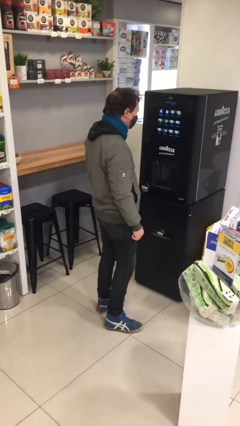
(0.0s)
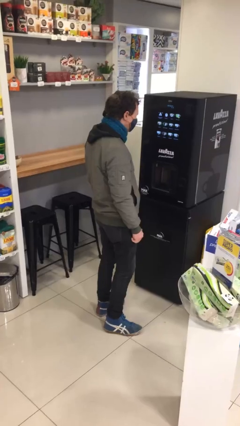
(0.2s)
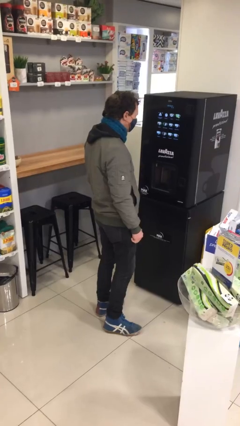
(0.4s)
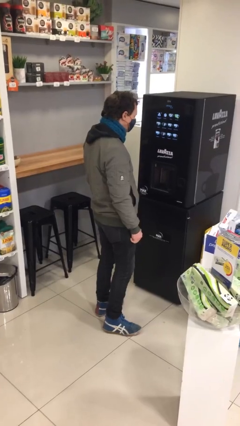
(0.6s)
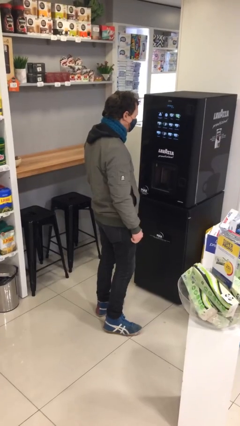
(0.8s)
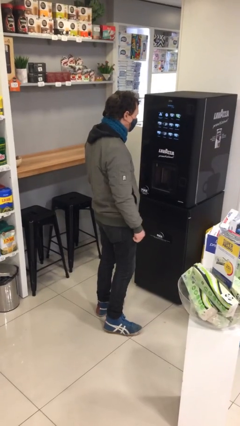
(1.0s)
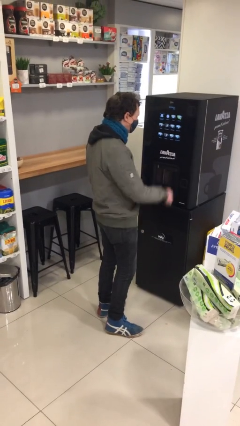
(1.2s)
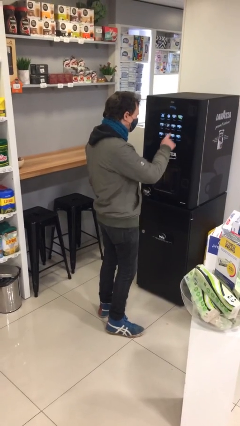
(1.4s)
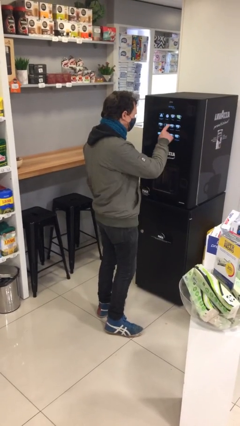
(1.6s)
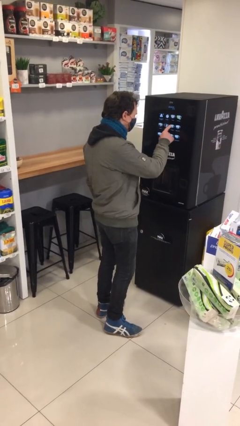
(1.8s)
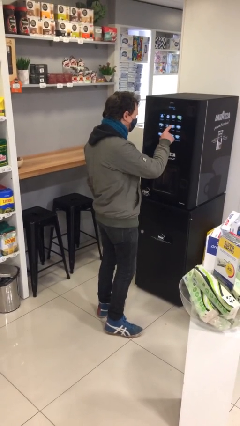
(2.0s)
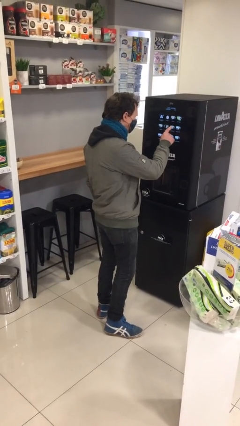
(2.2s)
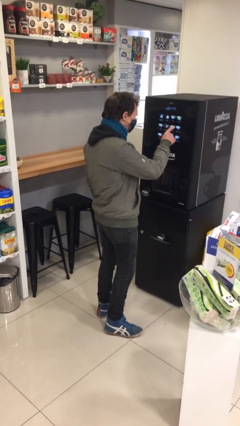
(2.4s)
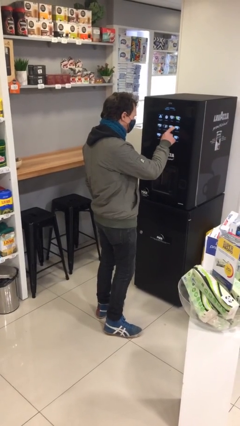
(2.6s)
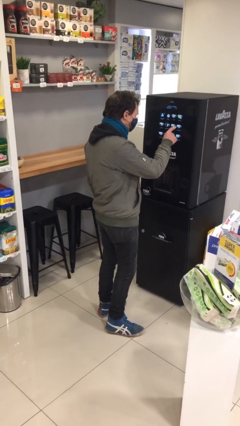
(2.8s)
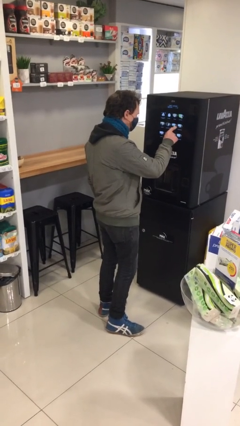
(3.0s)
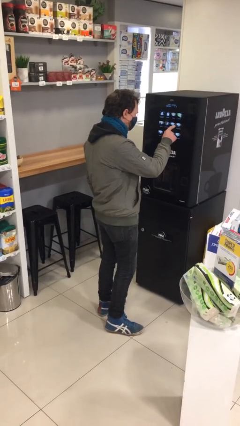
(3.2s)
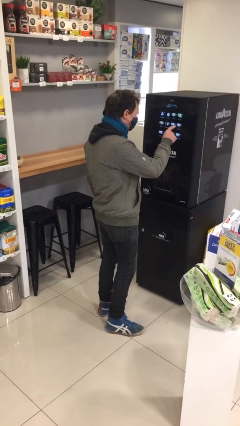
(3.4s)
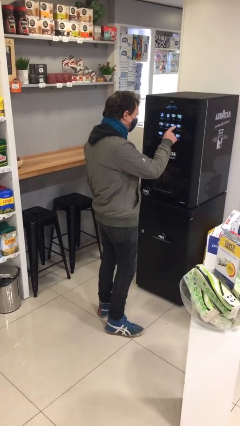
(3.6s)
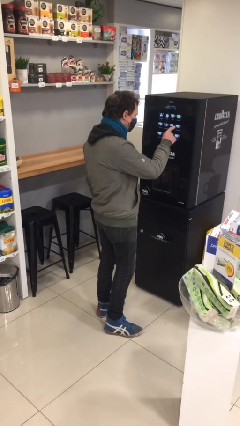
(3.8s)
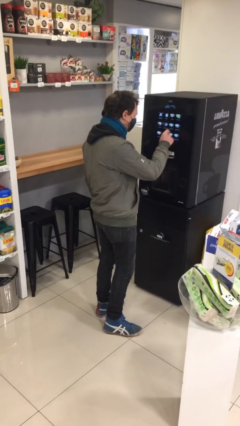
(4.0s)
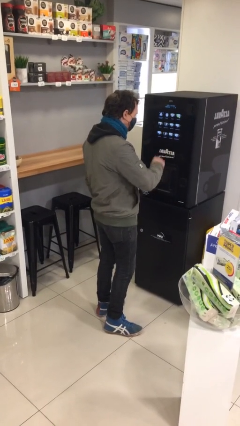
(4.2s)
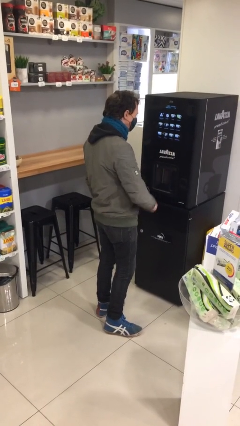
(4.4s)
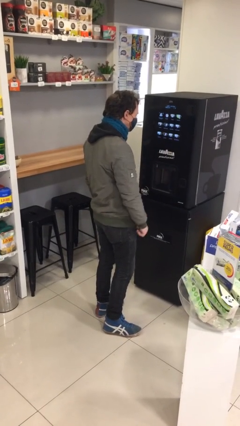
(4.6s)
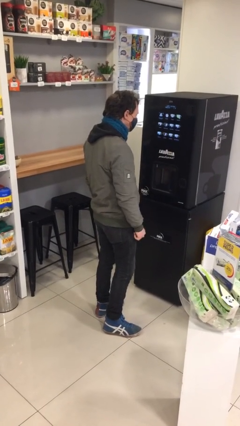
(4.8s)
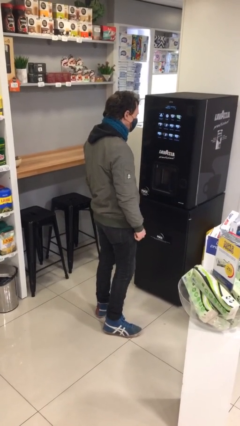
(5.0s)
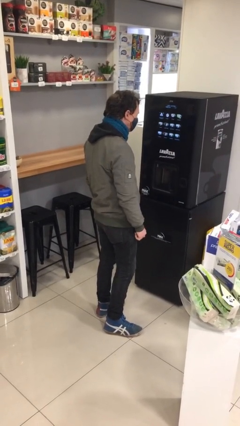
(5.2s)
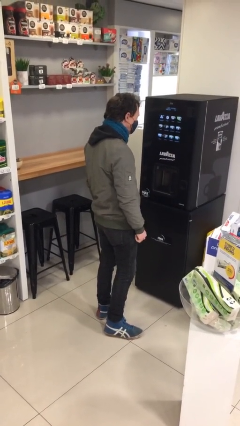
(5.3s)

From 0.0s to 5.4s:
person purchases from machine

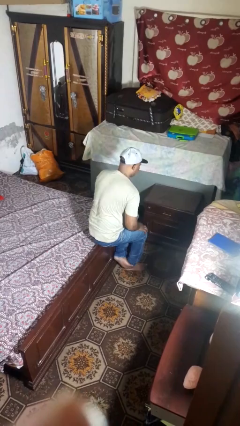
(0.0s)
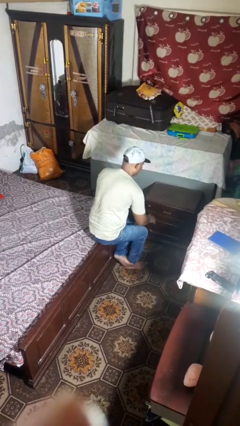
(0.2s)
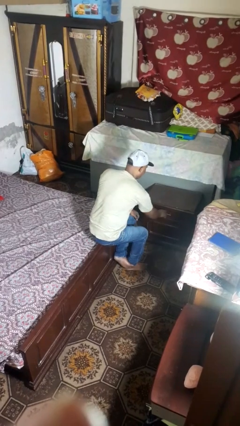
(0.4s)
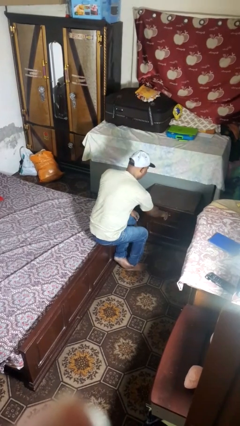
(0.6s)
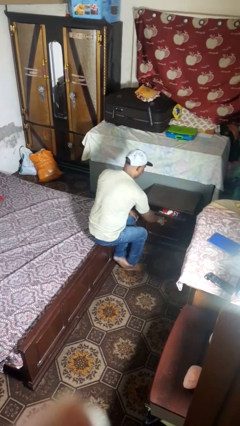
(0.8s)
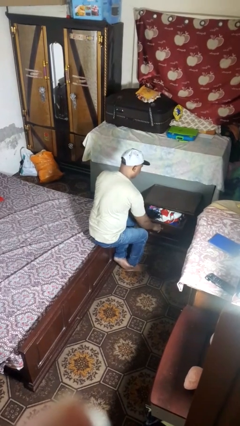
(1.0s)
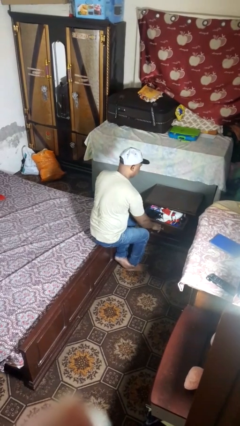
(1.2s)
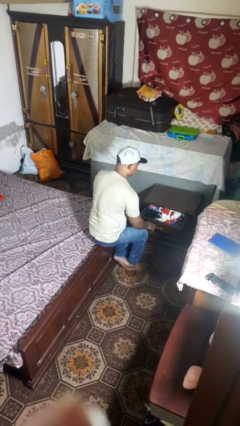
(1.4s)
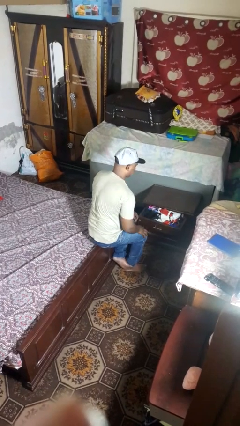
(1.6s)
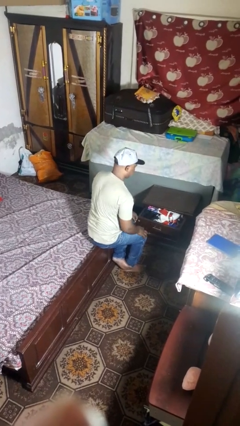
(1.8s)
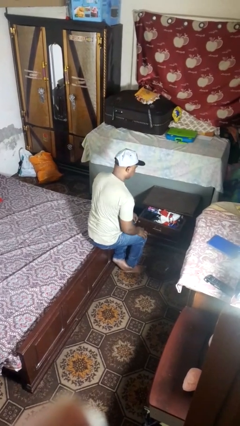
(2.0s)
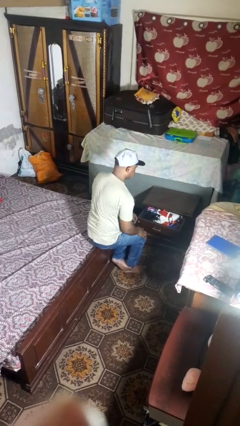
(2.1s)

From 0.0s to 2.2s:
person opens dresser drawer

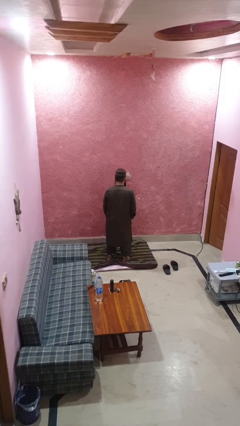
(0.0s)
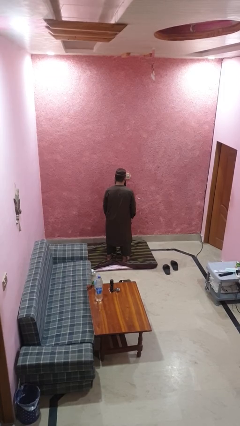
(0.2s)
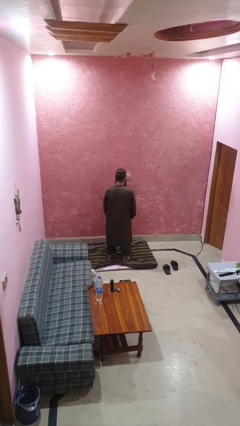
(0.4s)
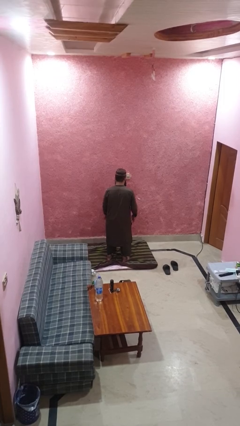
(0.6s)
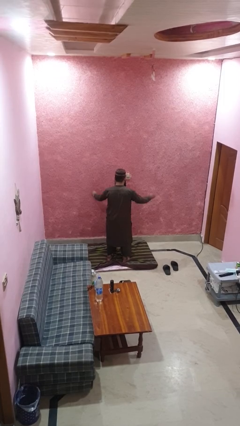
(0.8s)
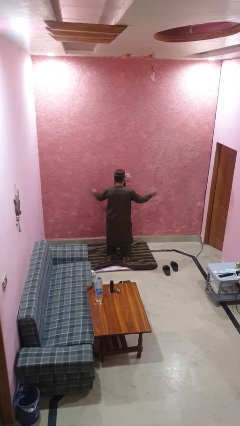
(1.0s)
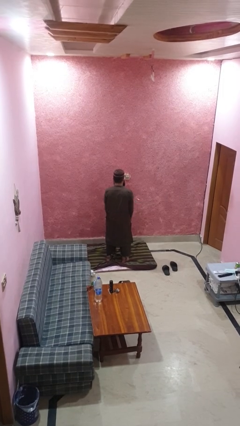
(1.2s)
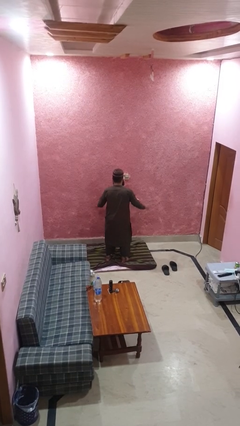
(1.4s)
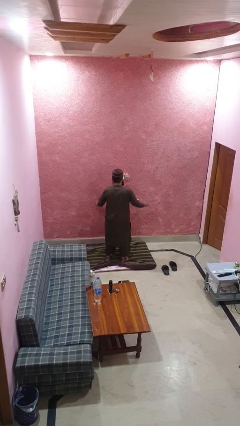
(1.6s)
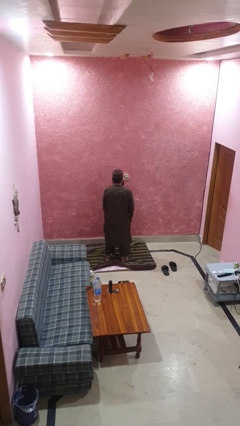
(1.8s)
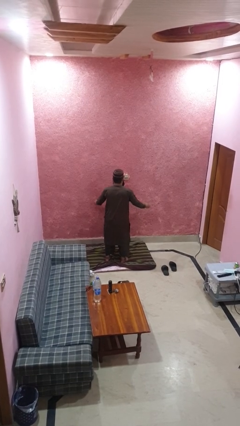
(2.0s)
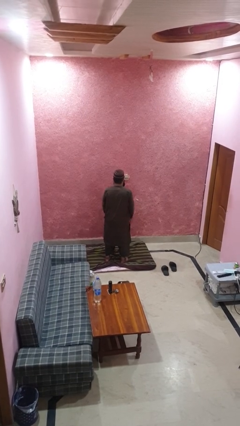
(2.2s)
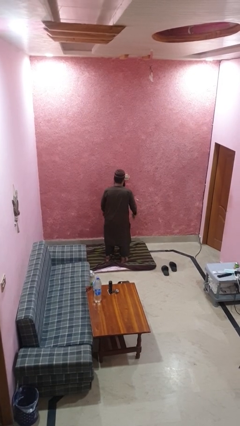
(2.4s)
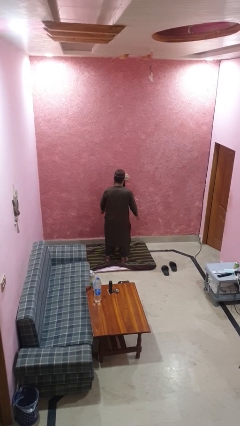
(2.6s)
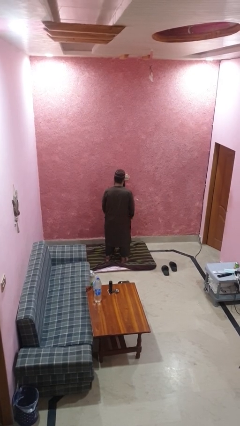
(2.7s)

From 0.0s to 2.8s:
person slaps hands on thighs

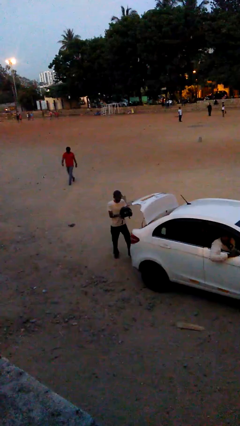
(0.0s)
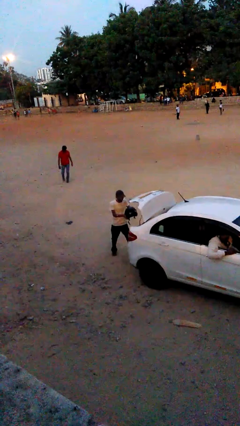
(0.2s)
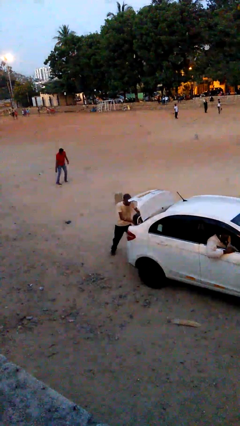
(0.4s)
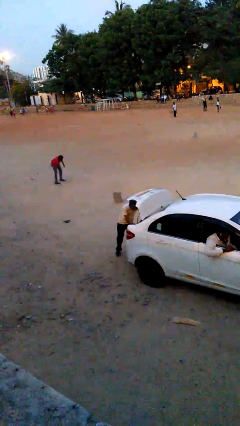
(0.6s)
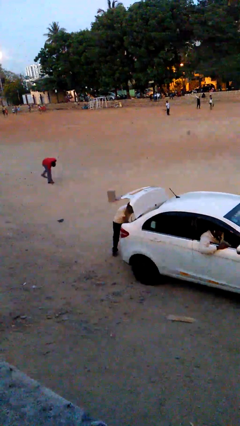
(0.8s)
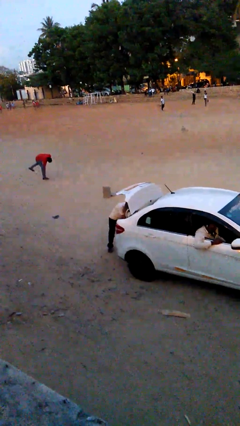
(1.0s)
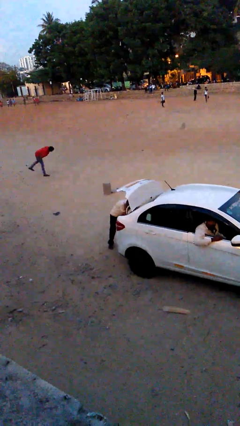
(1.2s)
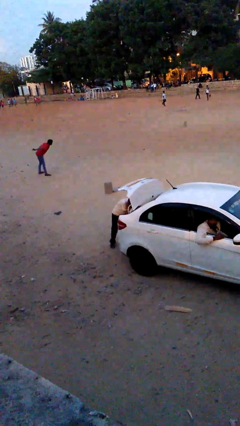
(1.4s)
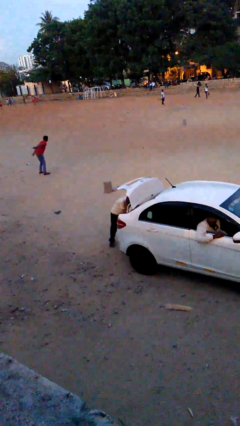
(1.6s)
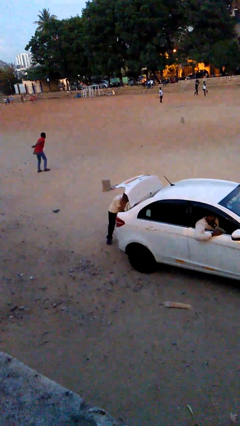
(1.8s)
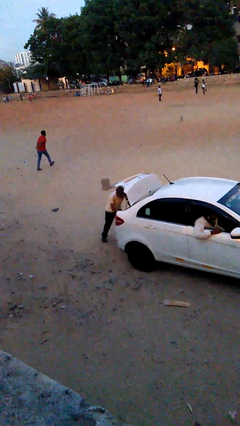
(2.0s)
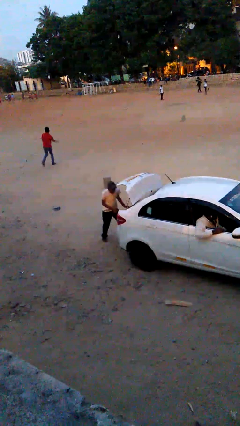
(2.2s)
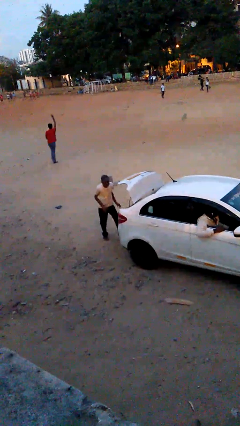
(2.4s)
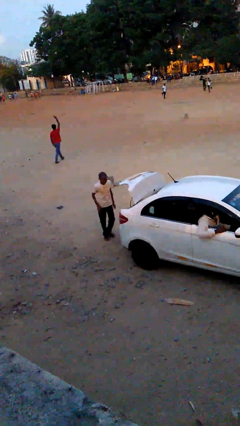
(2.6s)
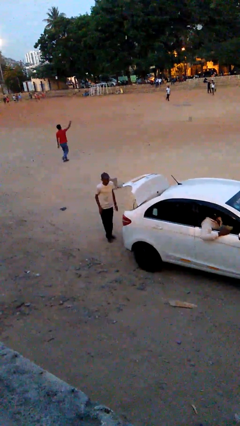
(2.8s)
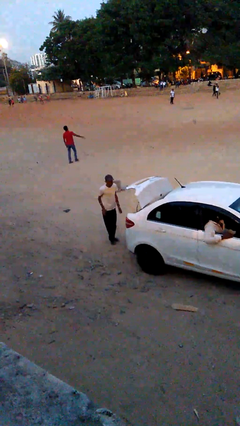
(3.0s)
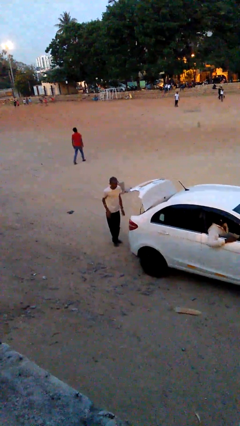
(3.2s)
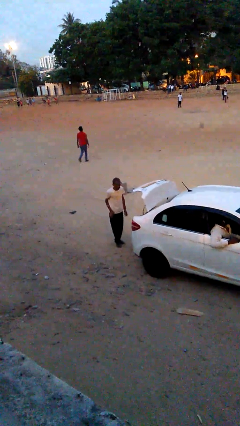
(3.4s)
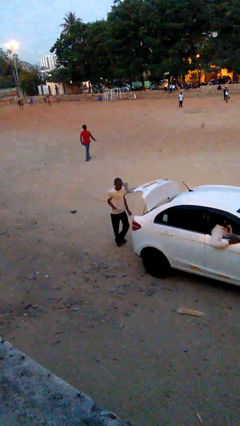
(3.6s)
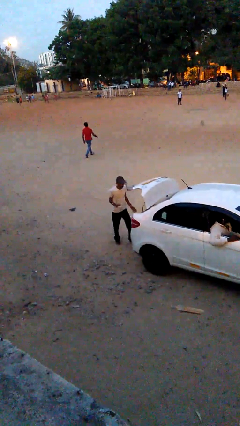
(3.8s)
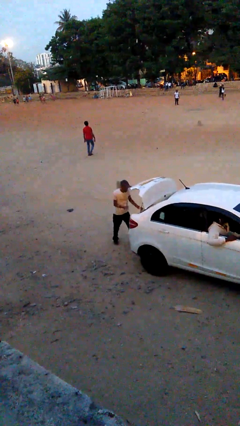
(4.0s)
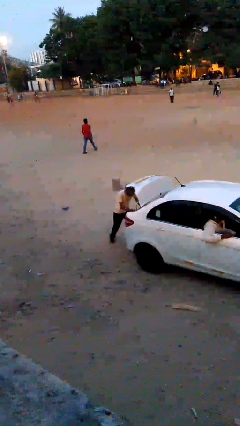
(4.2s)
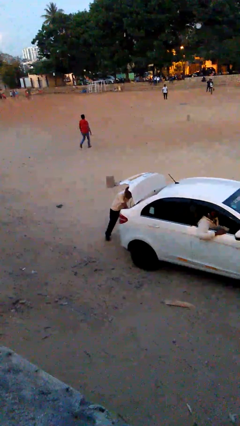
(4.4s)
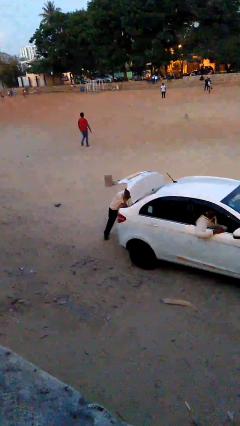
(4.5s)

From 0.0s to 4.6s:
person loads car

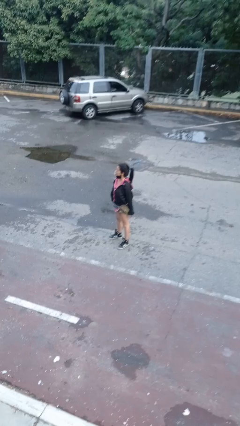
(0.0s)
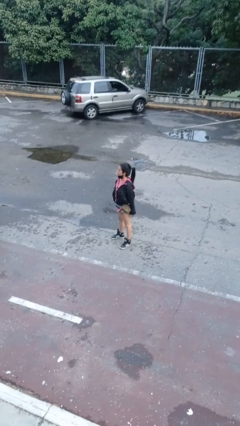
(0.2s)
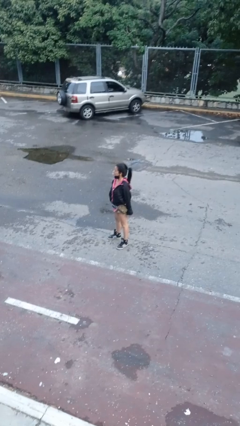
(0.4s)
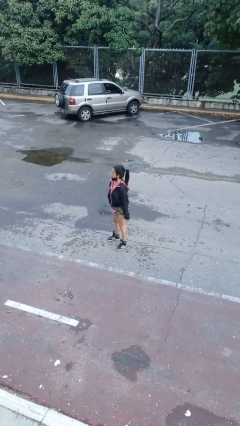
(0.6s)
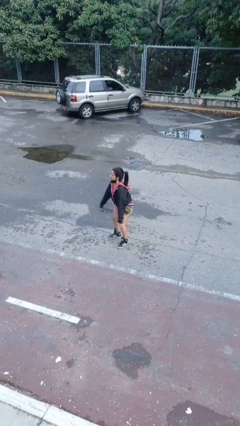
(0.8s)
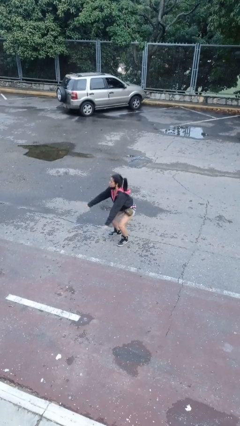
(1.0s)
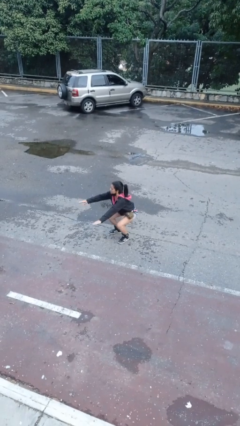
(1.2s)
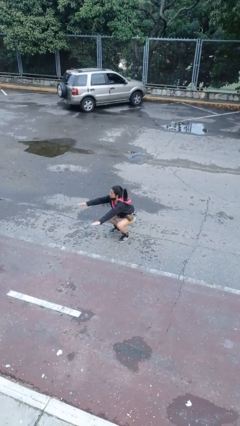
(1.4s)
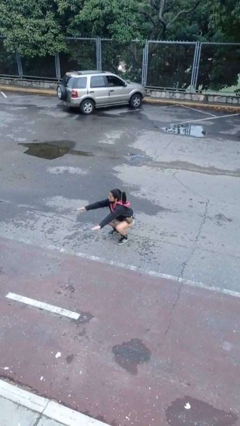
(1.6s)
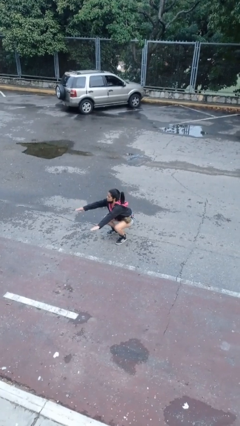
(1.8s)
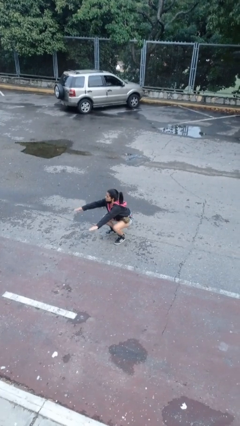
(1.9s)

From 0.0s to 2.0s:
person squats

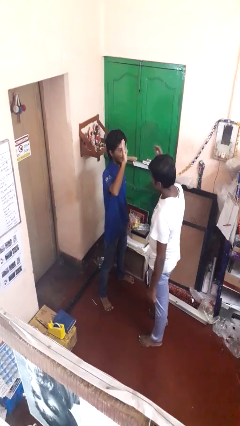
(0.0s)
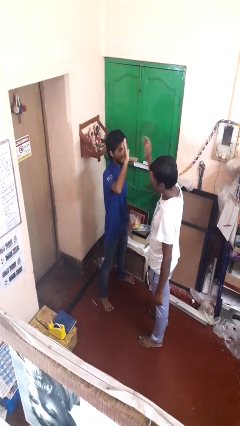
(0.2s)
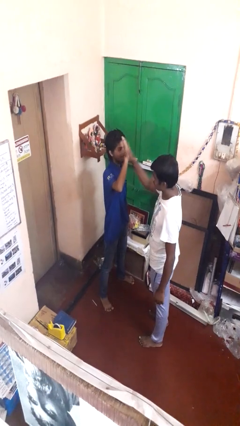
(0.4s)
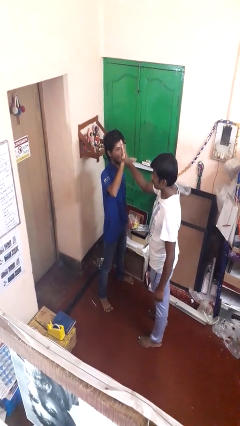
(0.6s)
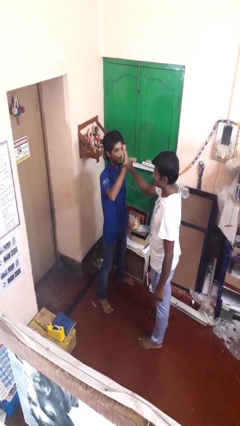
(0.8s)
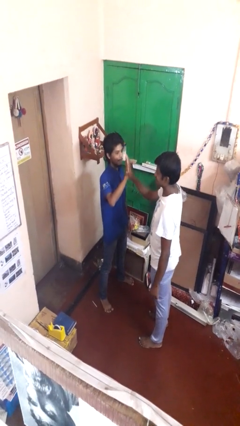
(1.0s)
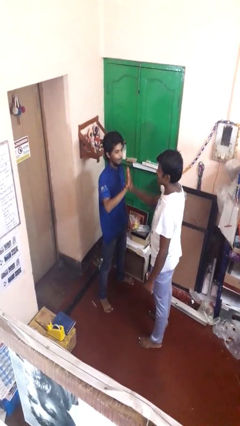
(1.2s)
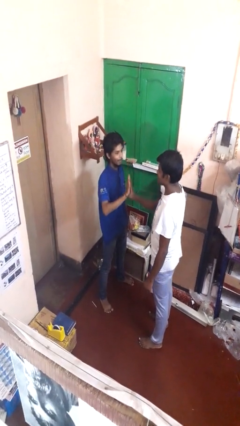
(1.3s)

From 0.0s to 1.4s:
person highfives hand
